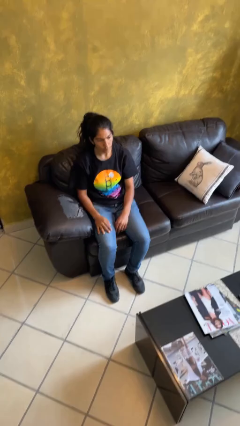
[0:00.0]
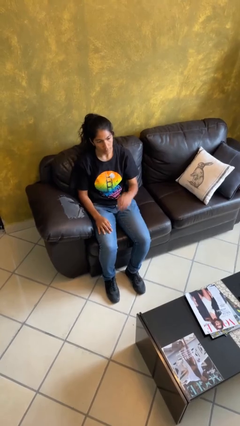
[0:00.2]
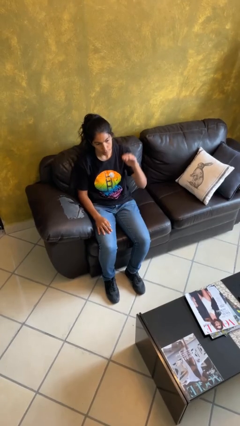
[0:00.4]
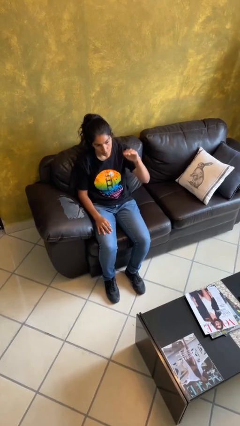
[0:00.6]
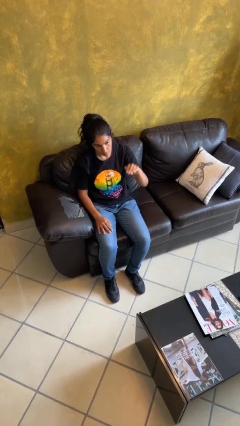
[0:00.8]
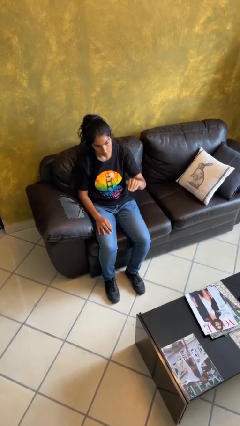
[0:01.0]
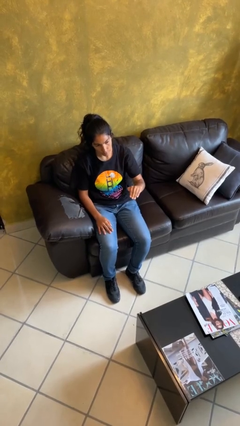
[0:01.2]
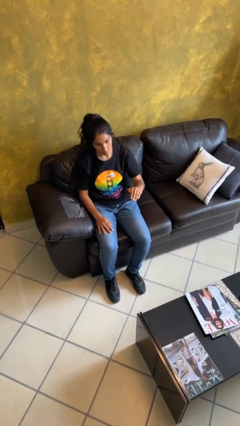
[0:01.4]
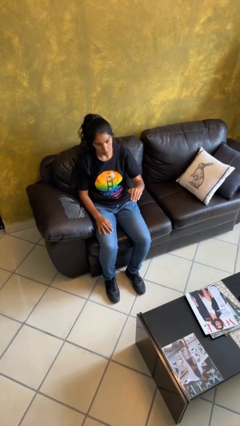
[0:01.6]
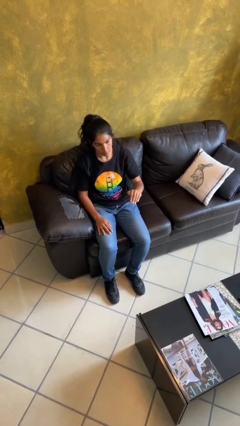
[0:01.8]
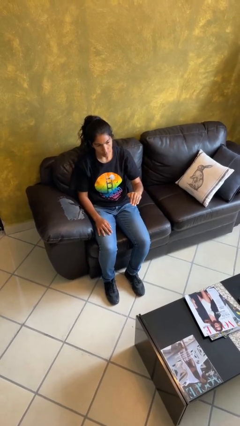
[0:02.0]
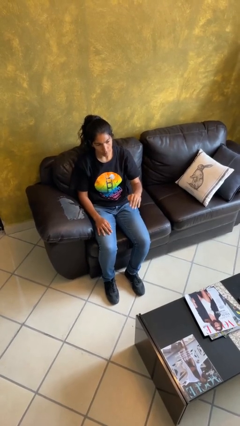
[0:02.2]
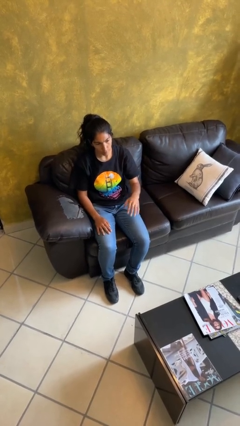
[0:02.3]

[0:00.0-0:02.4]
person gestures swipe down

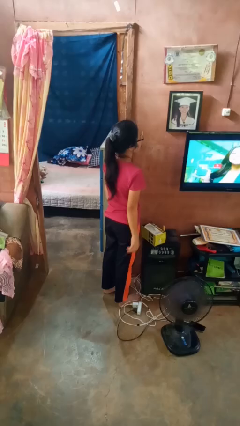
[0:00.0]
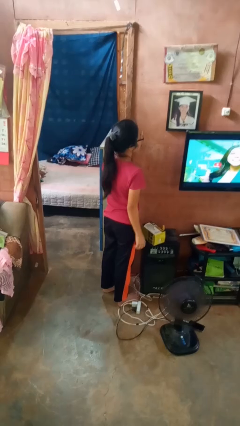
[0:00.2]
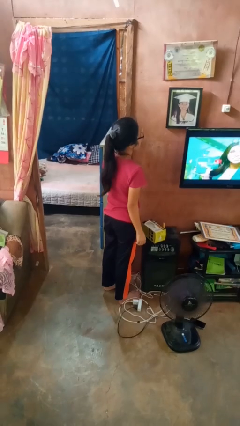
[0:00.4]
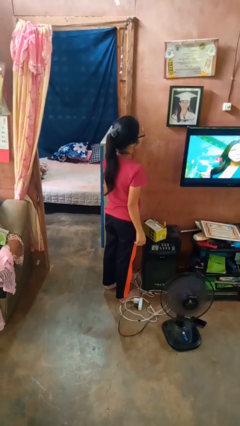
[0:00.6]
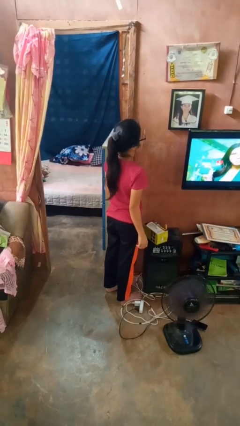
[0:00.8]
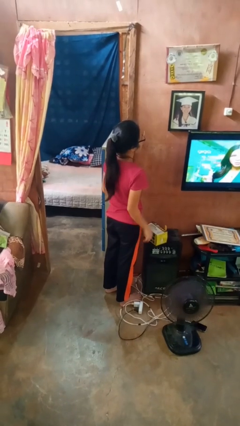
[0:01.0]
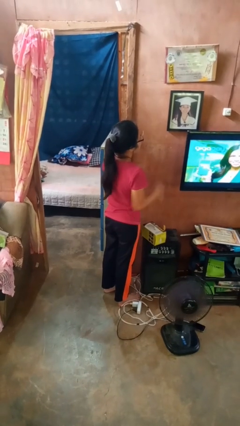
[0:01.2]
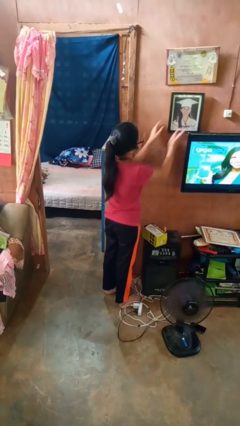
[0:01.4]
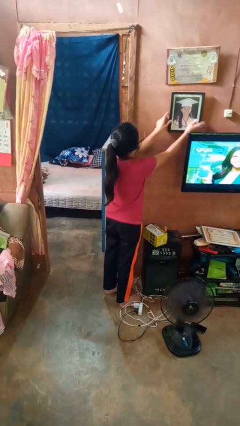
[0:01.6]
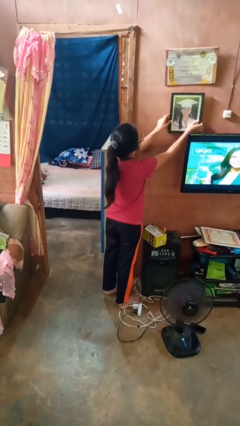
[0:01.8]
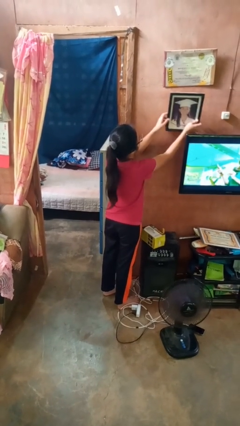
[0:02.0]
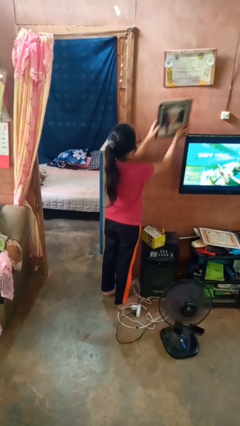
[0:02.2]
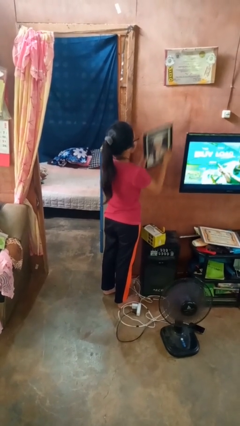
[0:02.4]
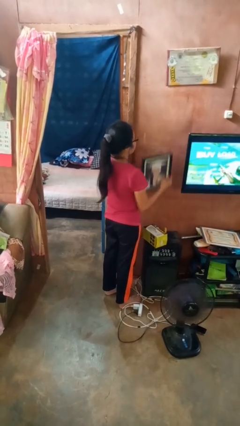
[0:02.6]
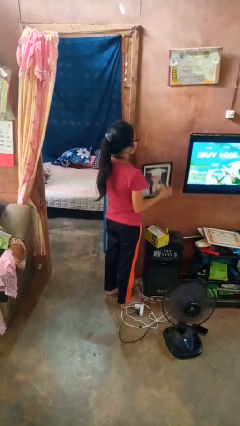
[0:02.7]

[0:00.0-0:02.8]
person takes down picture frame

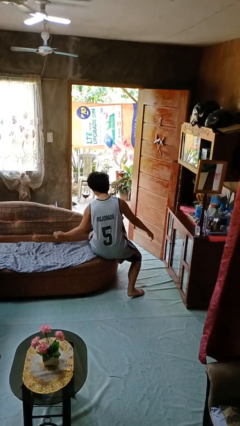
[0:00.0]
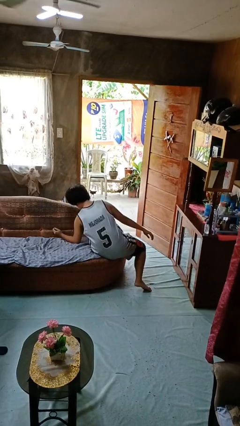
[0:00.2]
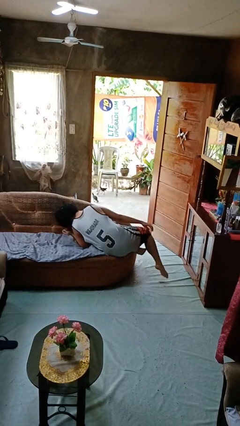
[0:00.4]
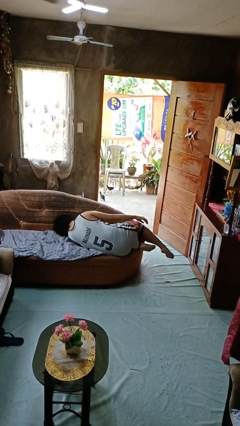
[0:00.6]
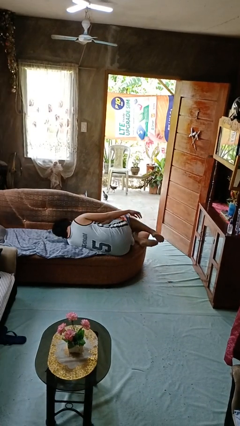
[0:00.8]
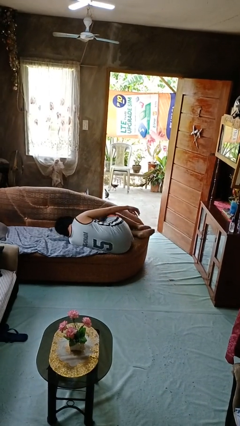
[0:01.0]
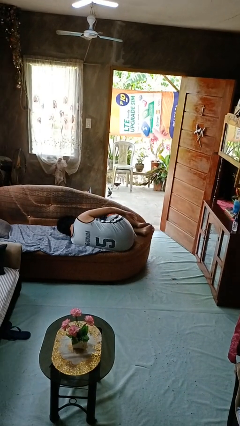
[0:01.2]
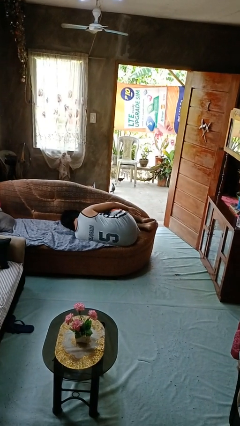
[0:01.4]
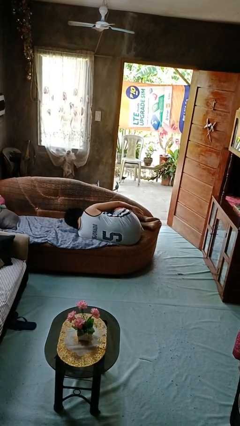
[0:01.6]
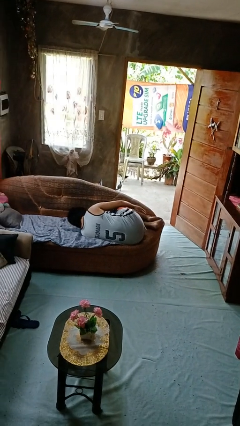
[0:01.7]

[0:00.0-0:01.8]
person lies down on couch

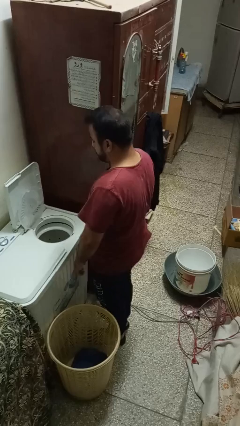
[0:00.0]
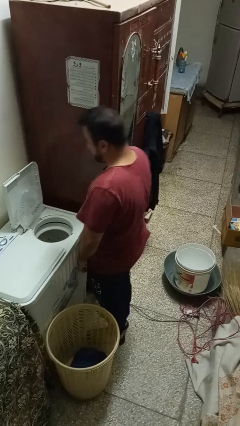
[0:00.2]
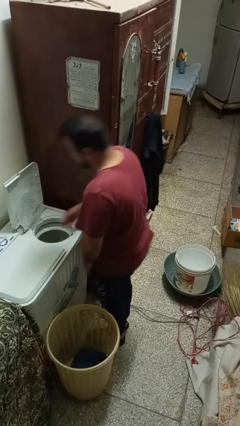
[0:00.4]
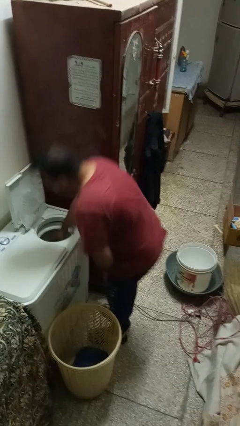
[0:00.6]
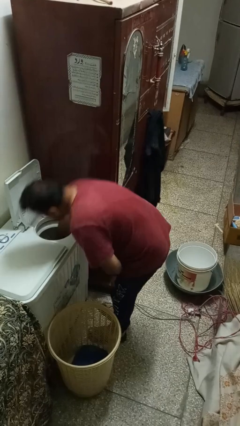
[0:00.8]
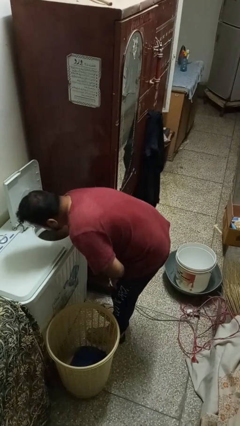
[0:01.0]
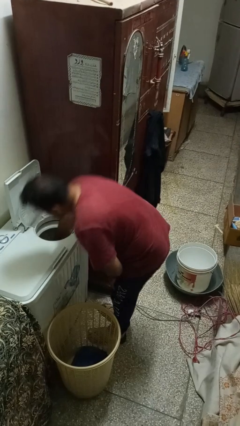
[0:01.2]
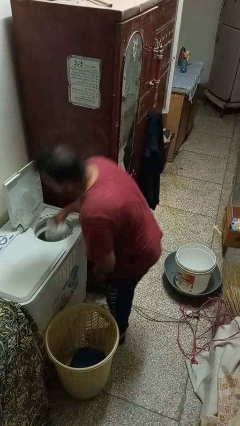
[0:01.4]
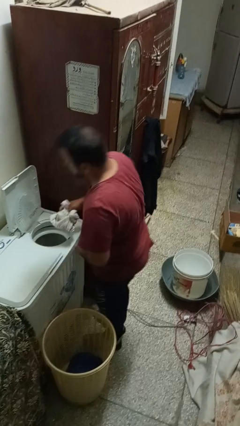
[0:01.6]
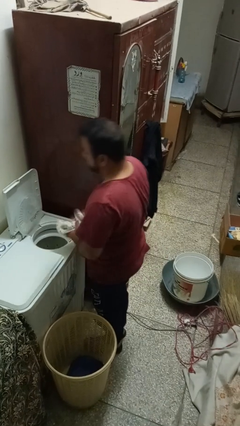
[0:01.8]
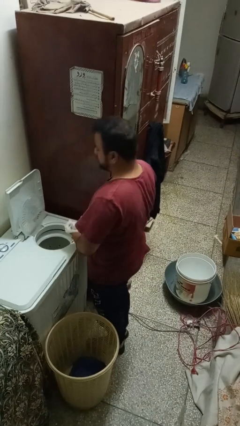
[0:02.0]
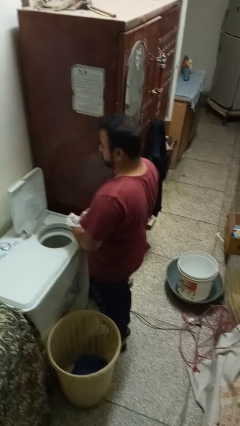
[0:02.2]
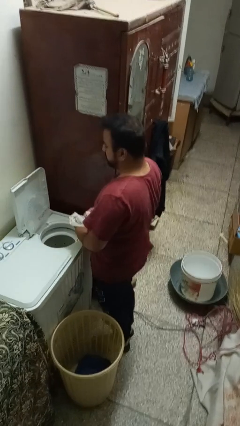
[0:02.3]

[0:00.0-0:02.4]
person unloads dryer

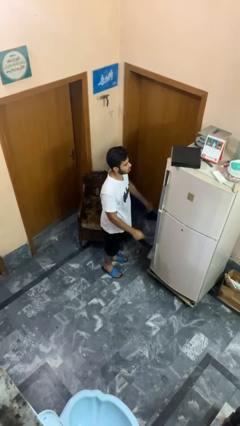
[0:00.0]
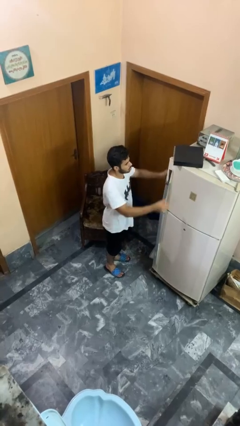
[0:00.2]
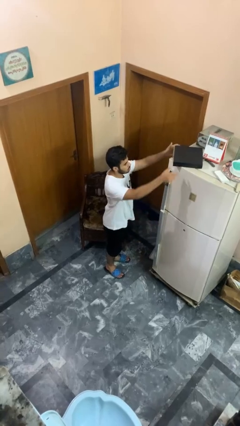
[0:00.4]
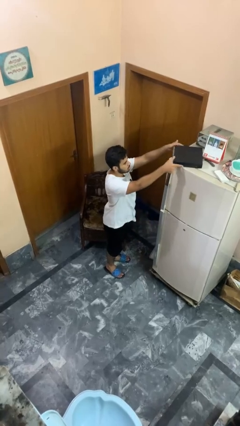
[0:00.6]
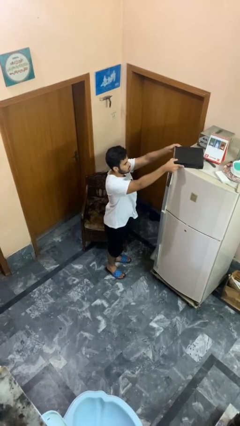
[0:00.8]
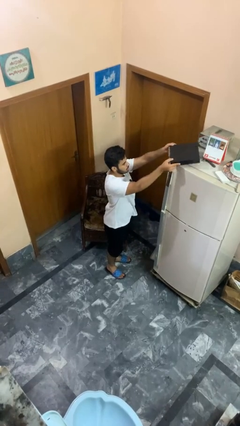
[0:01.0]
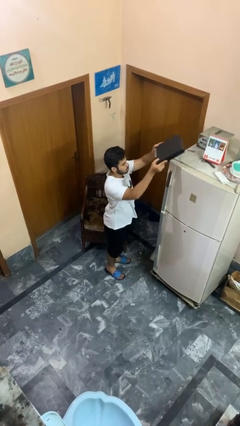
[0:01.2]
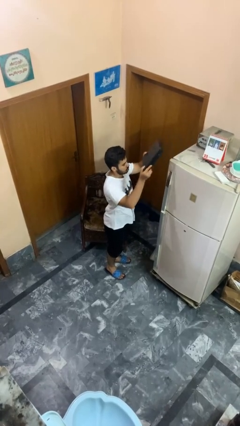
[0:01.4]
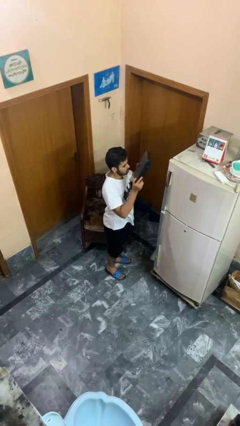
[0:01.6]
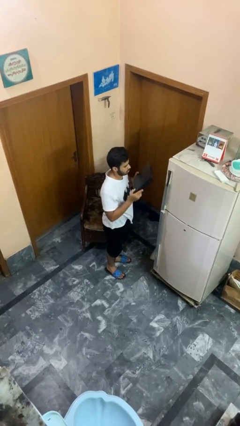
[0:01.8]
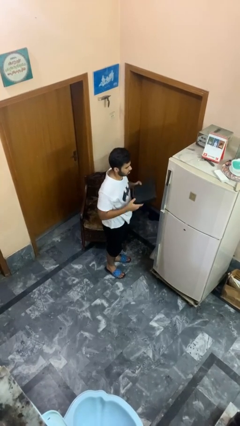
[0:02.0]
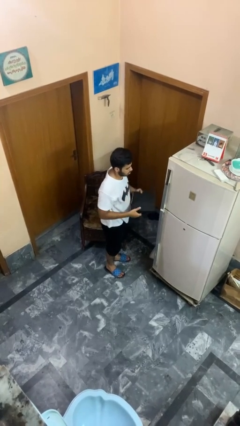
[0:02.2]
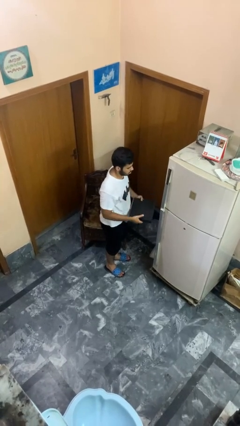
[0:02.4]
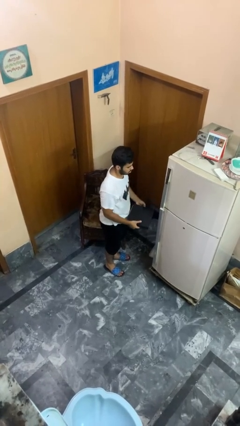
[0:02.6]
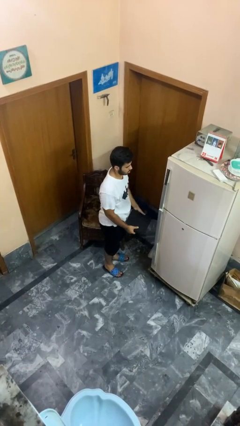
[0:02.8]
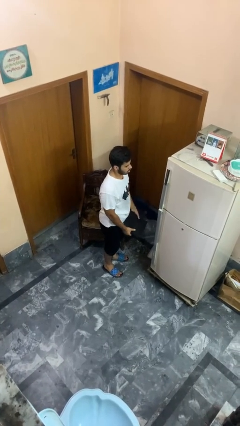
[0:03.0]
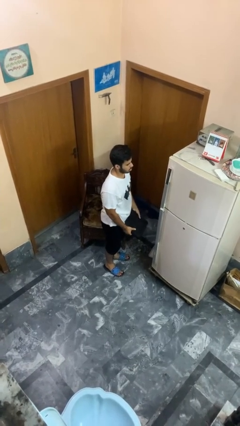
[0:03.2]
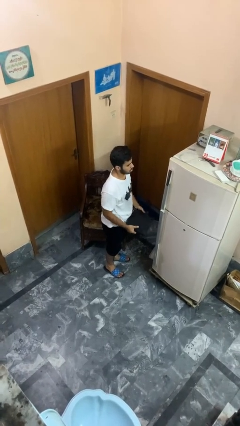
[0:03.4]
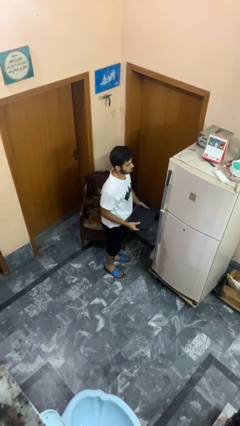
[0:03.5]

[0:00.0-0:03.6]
person picks up object from countertop

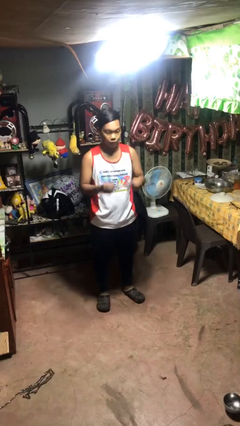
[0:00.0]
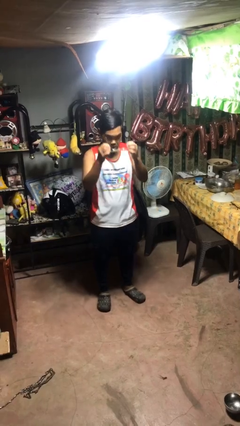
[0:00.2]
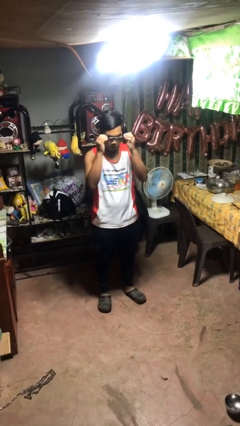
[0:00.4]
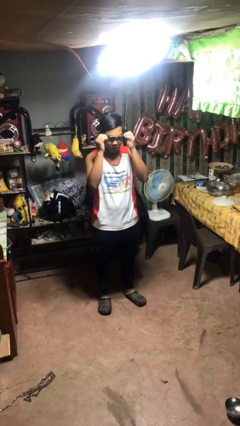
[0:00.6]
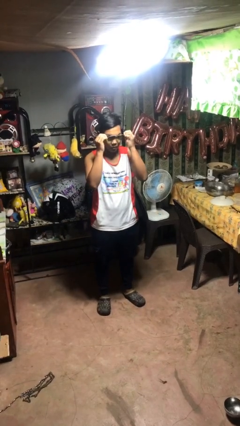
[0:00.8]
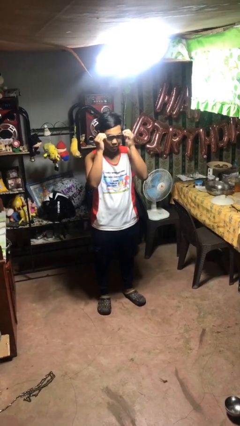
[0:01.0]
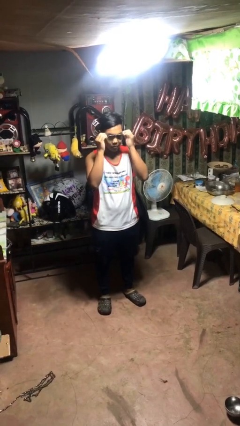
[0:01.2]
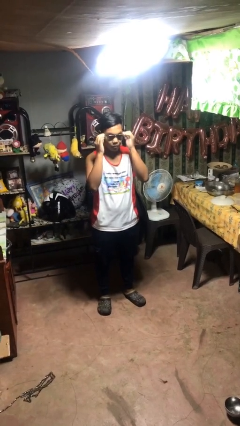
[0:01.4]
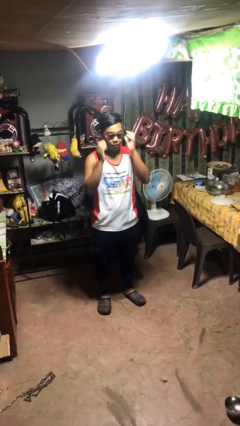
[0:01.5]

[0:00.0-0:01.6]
person puts on sunglasses

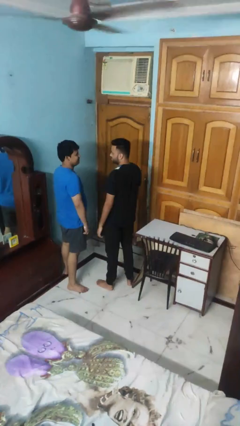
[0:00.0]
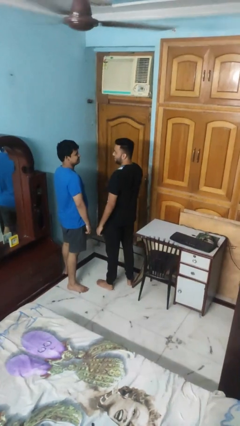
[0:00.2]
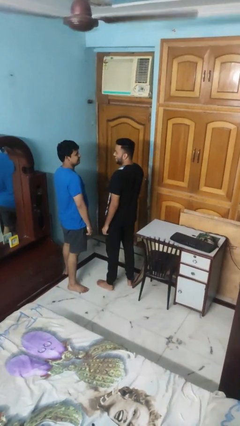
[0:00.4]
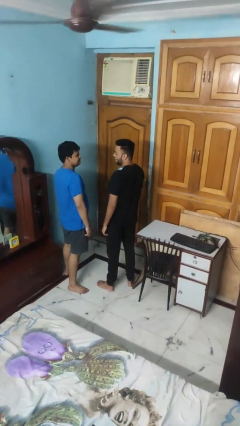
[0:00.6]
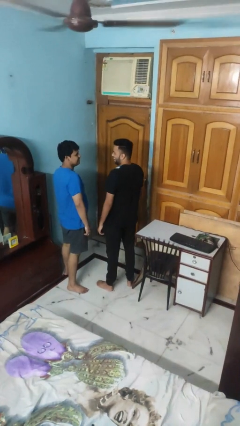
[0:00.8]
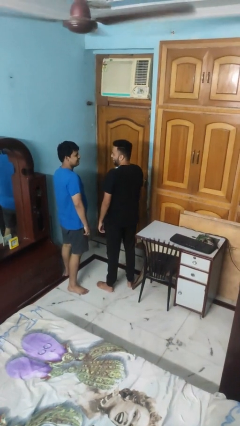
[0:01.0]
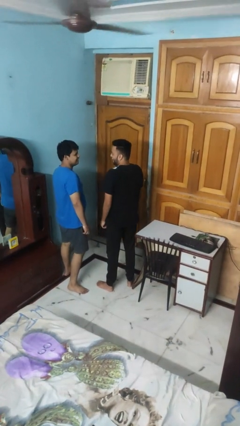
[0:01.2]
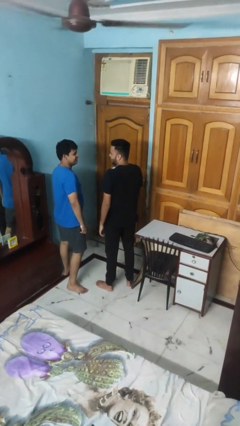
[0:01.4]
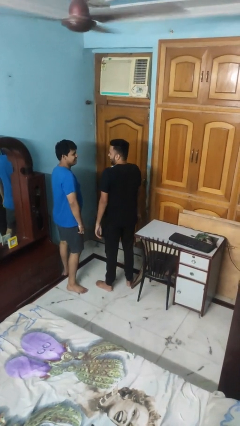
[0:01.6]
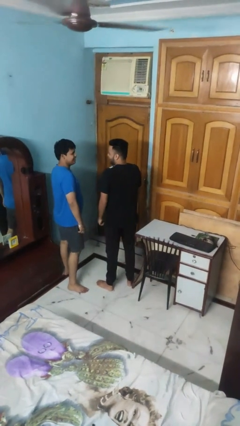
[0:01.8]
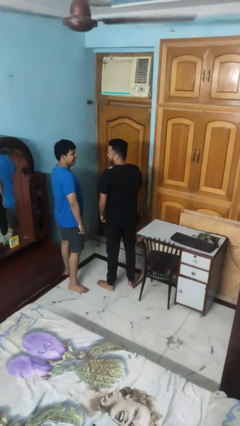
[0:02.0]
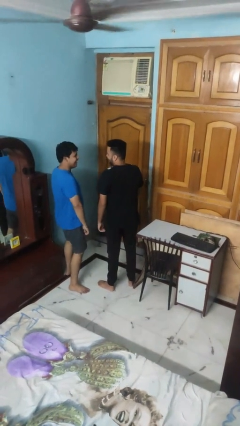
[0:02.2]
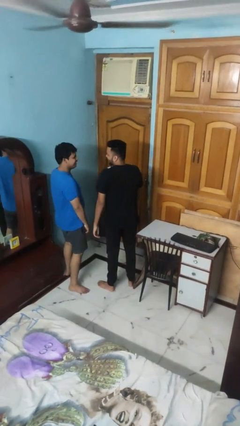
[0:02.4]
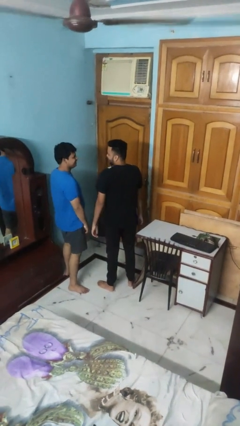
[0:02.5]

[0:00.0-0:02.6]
person laughs with person

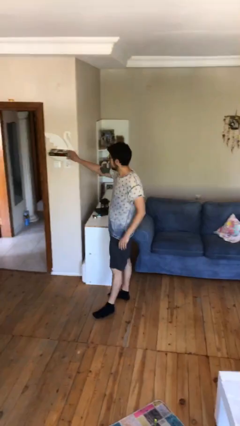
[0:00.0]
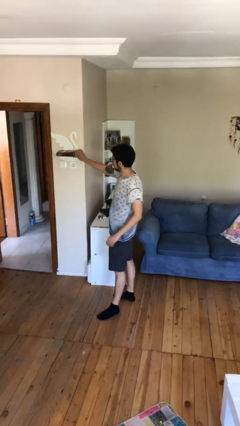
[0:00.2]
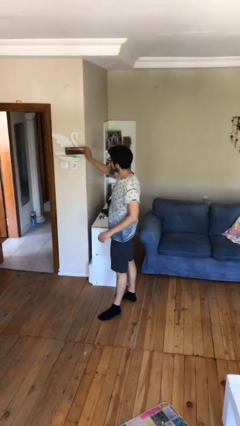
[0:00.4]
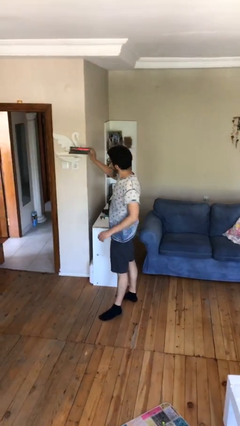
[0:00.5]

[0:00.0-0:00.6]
person picks up object from shelf
